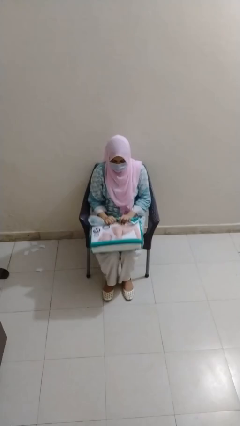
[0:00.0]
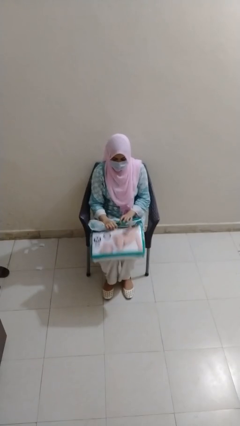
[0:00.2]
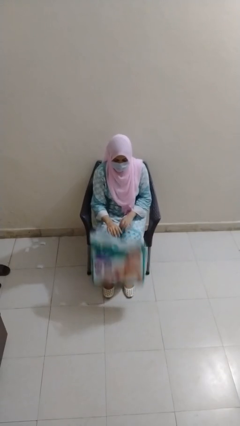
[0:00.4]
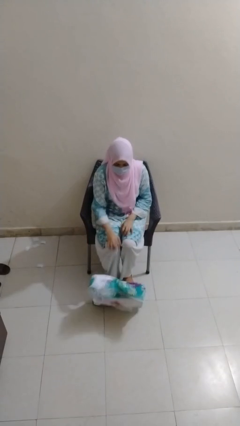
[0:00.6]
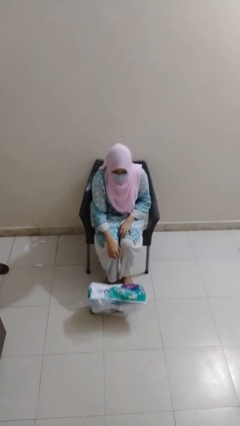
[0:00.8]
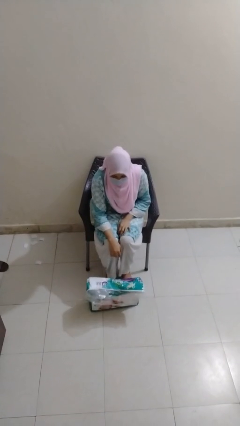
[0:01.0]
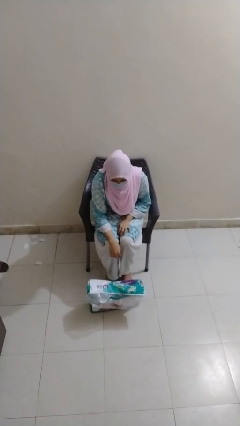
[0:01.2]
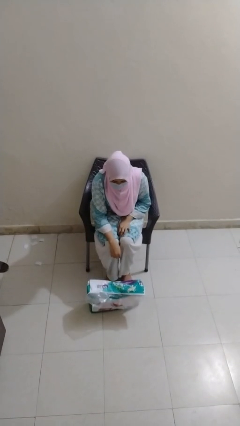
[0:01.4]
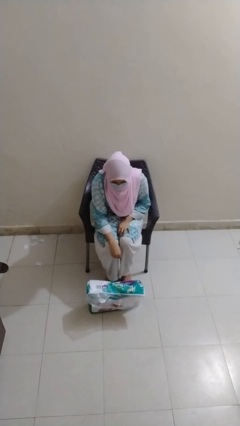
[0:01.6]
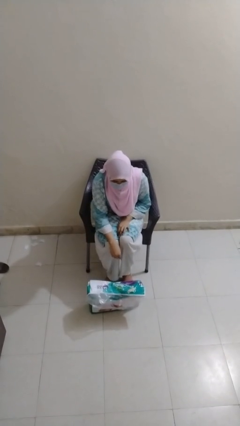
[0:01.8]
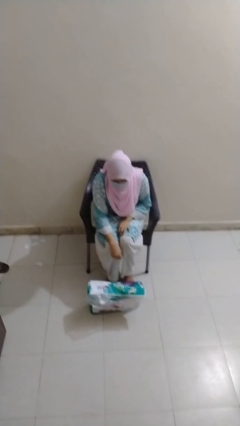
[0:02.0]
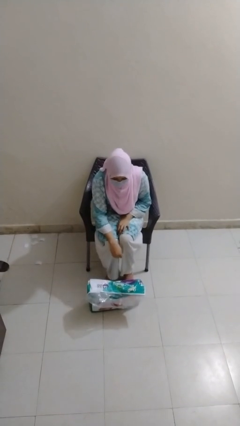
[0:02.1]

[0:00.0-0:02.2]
person drops object

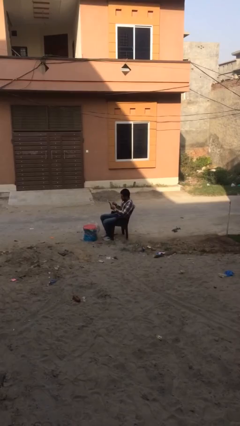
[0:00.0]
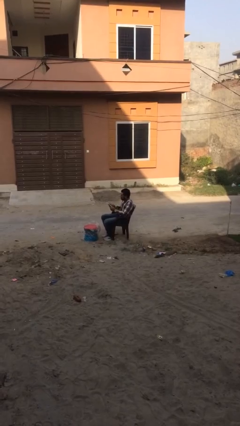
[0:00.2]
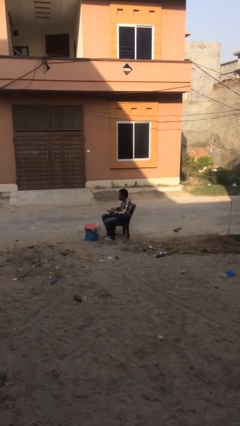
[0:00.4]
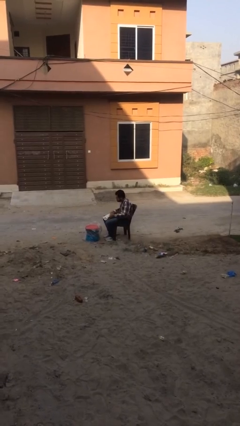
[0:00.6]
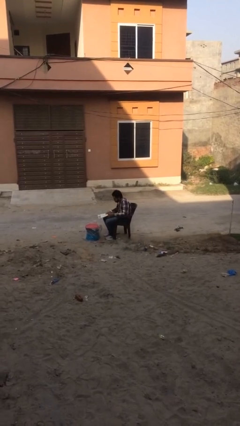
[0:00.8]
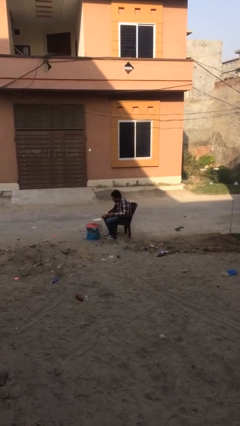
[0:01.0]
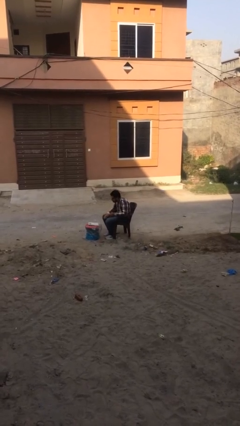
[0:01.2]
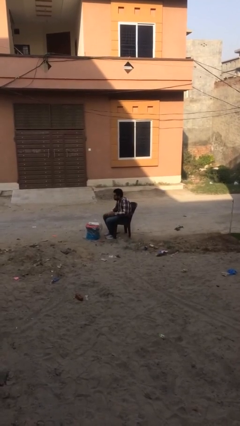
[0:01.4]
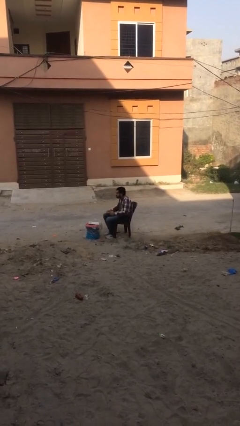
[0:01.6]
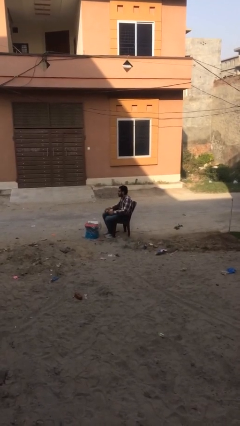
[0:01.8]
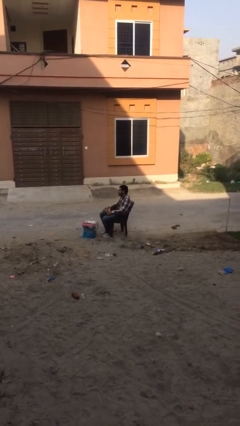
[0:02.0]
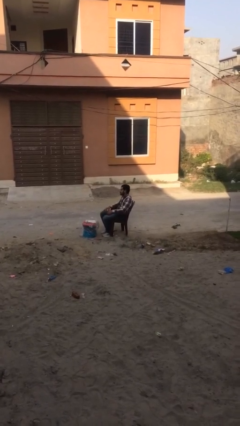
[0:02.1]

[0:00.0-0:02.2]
person puts down object on table

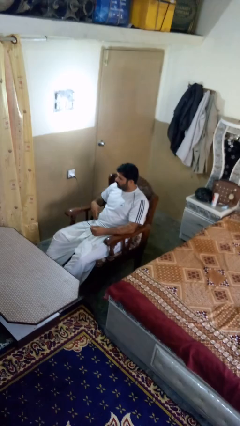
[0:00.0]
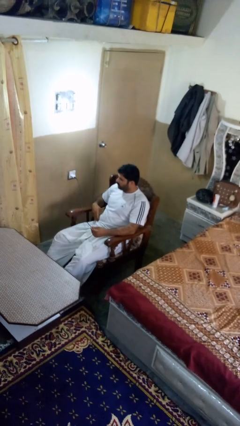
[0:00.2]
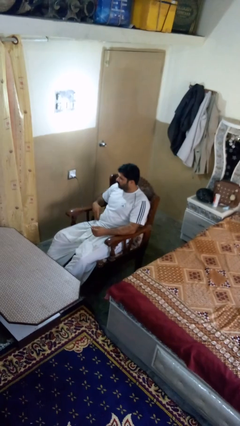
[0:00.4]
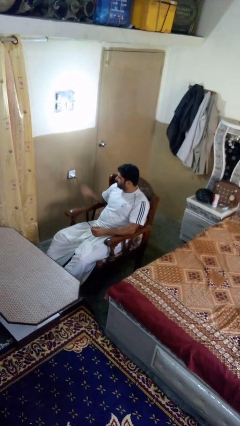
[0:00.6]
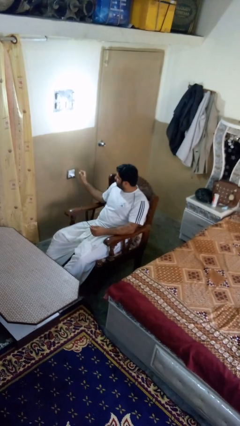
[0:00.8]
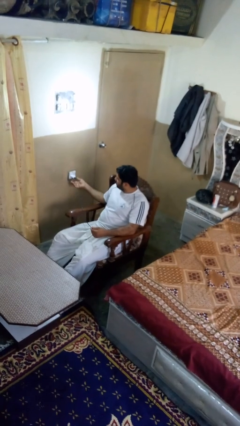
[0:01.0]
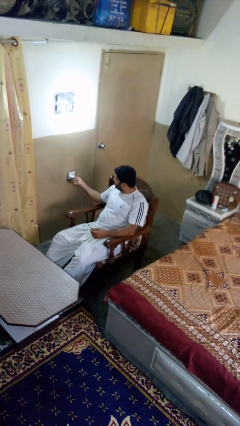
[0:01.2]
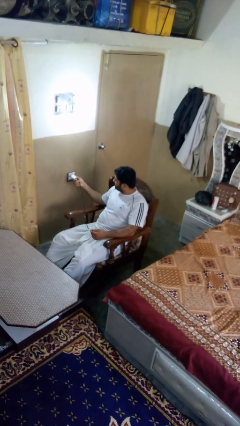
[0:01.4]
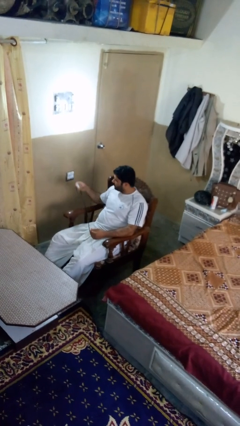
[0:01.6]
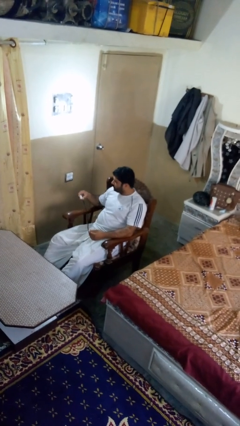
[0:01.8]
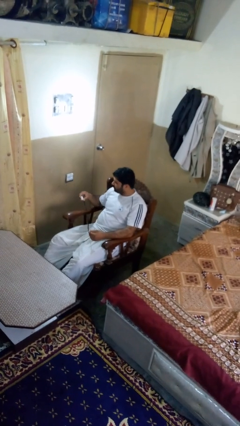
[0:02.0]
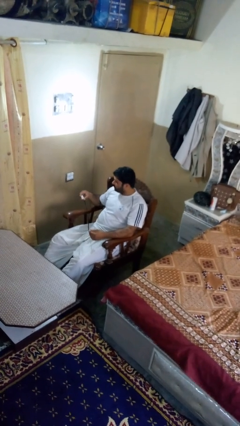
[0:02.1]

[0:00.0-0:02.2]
person unplugs from electrical socket

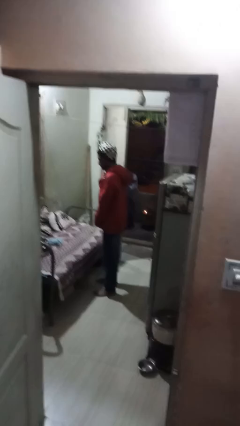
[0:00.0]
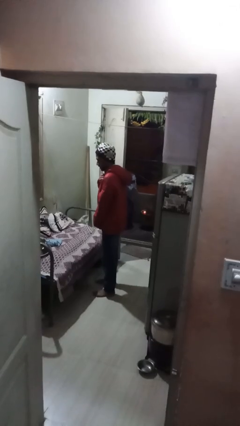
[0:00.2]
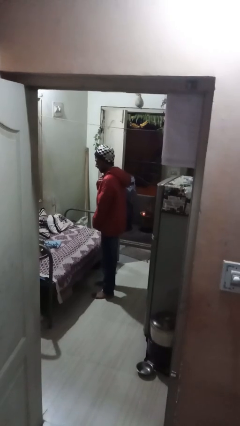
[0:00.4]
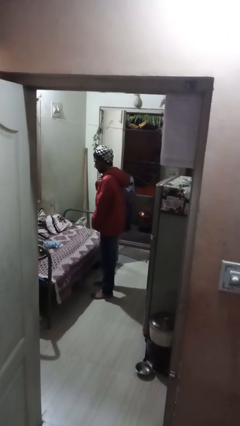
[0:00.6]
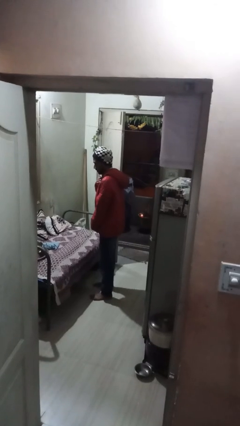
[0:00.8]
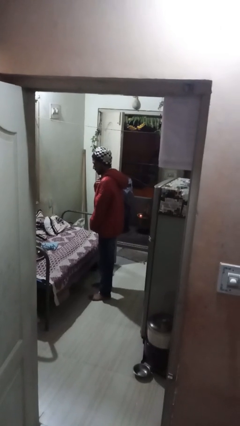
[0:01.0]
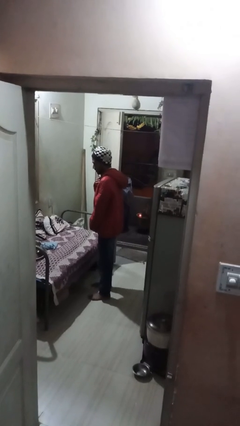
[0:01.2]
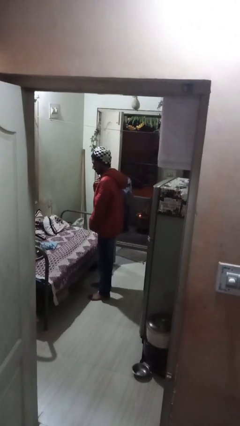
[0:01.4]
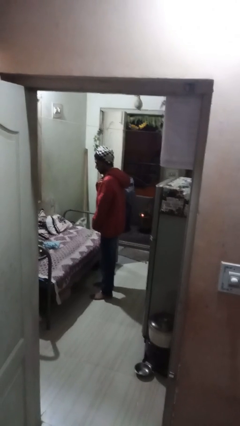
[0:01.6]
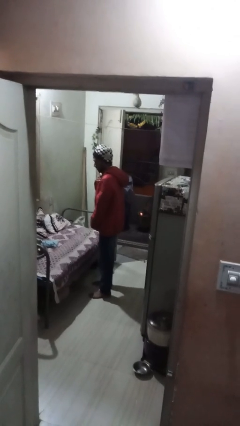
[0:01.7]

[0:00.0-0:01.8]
person zips up jacket

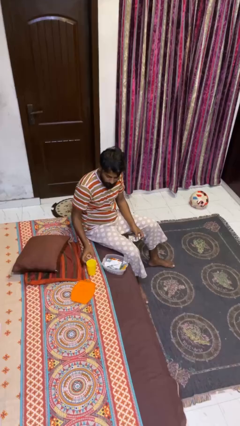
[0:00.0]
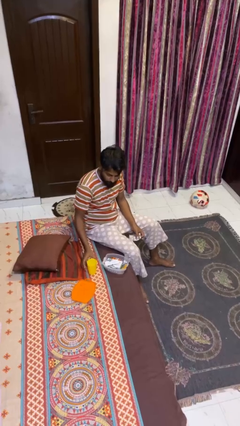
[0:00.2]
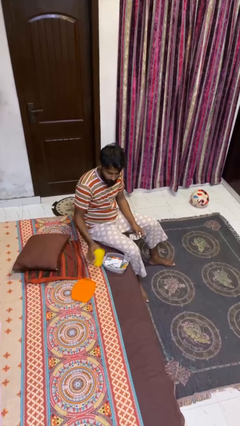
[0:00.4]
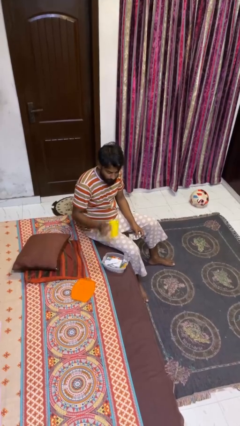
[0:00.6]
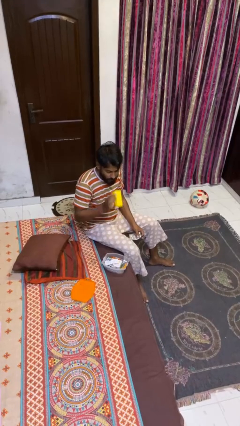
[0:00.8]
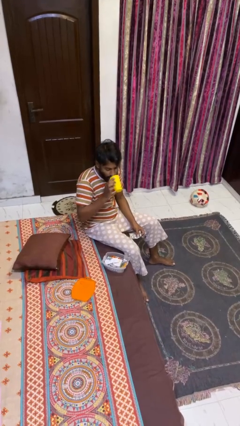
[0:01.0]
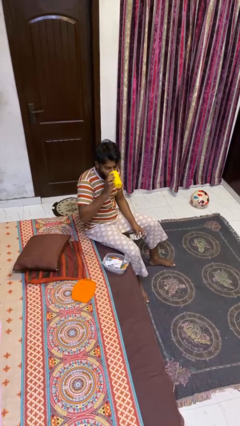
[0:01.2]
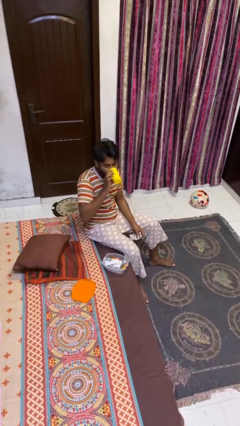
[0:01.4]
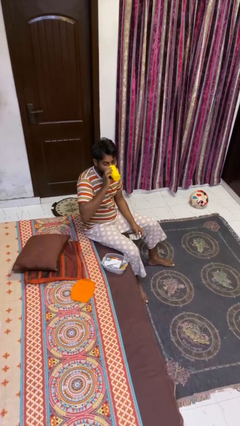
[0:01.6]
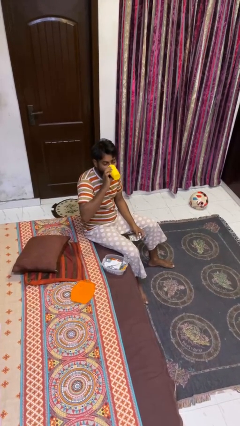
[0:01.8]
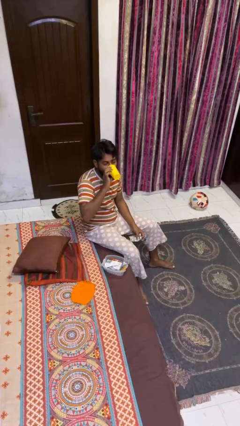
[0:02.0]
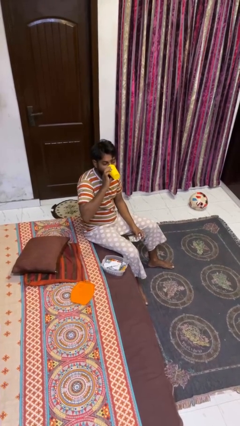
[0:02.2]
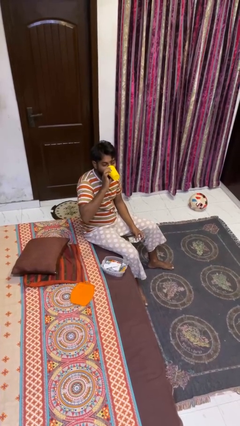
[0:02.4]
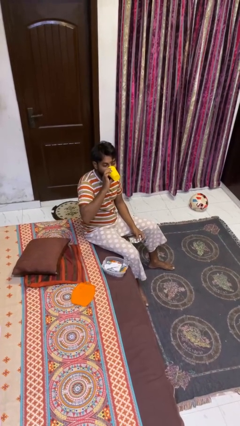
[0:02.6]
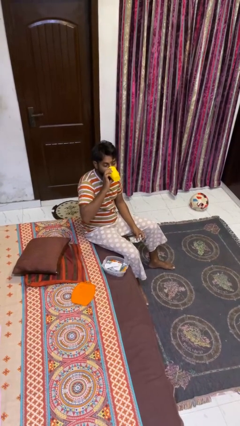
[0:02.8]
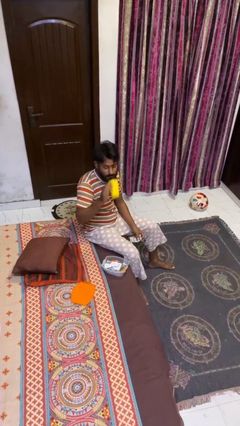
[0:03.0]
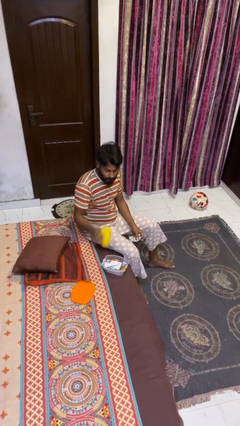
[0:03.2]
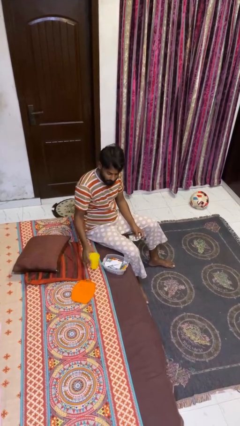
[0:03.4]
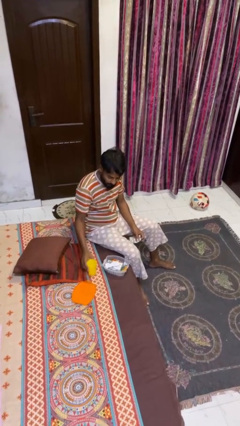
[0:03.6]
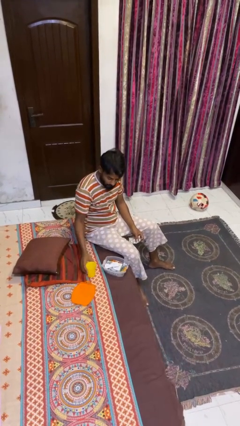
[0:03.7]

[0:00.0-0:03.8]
person drinks from cup

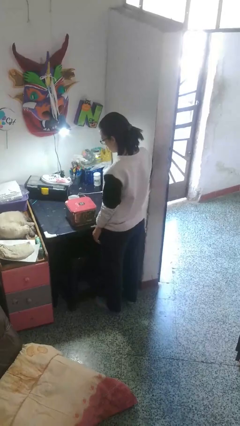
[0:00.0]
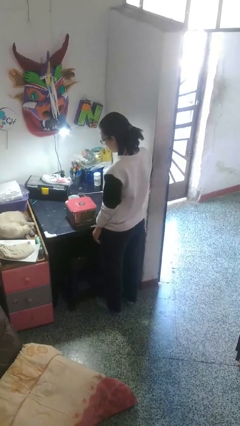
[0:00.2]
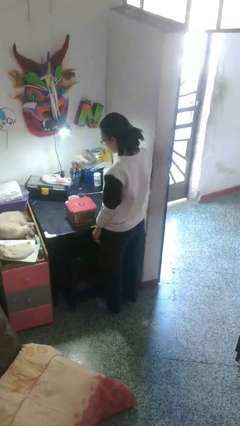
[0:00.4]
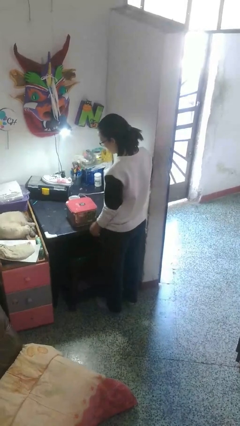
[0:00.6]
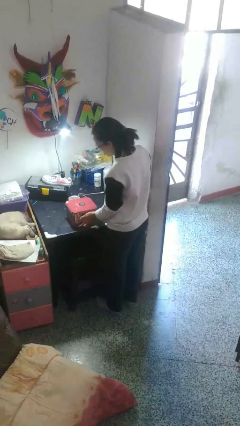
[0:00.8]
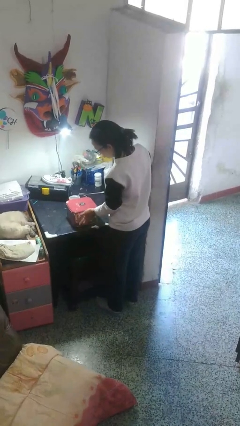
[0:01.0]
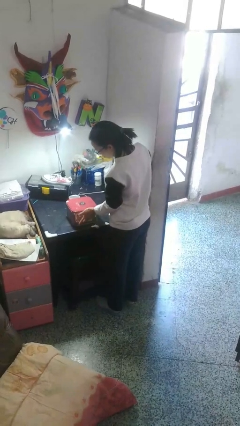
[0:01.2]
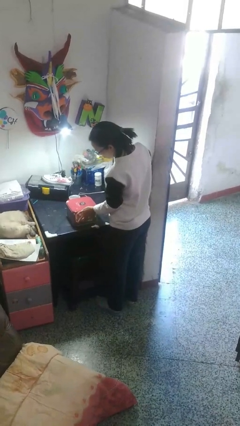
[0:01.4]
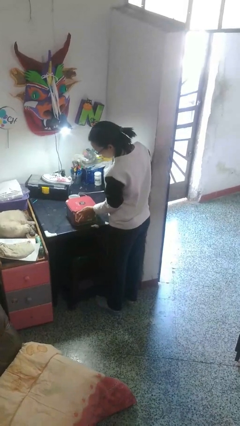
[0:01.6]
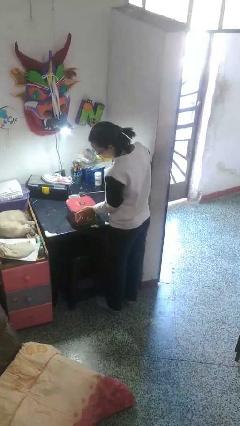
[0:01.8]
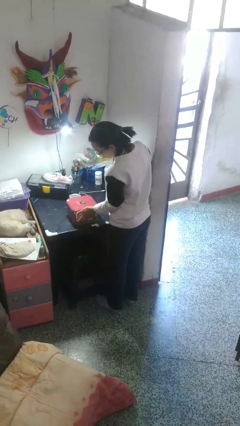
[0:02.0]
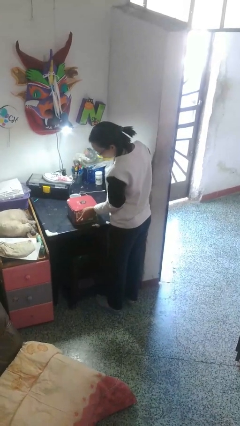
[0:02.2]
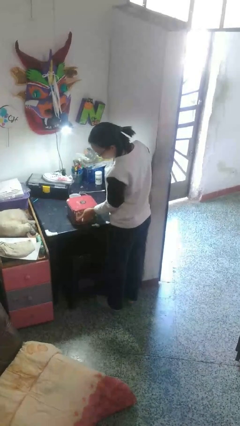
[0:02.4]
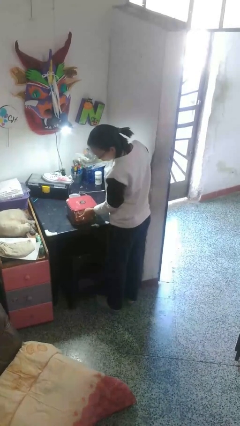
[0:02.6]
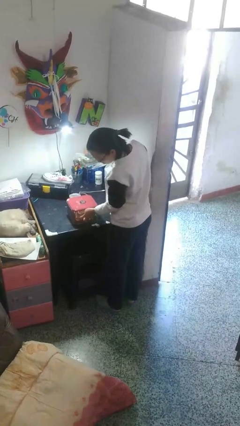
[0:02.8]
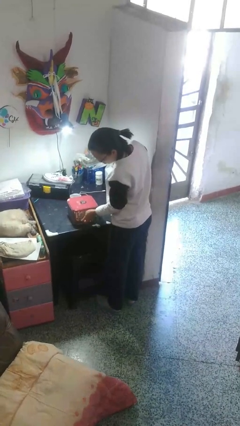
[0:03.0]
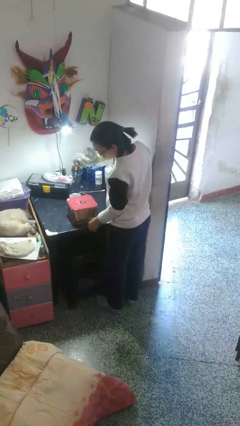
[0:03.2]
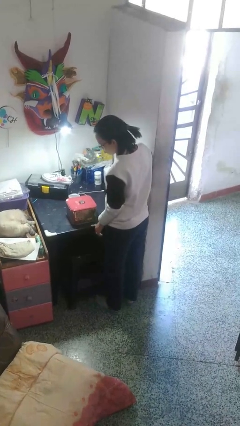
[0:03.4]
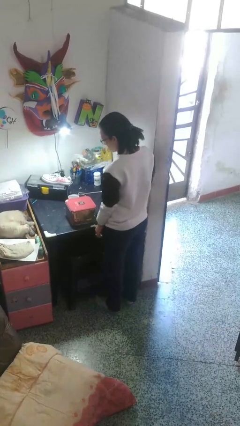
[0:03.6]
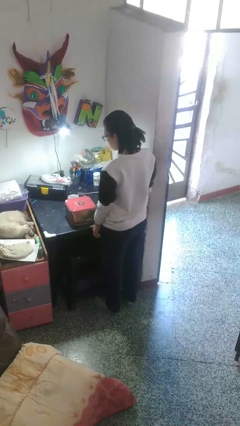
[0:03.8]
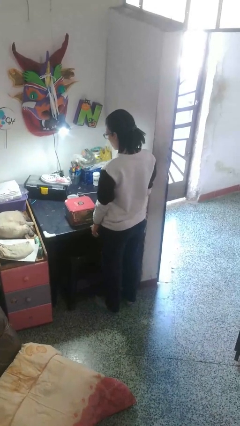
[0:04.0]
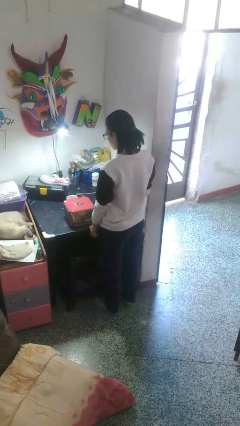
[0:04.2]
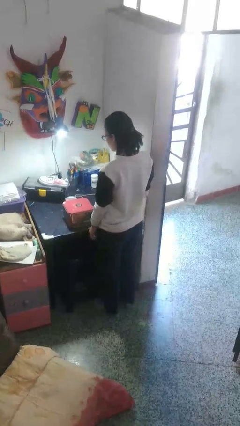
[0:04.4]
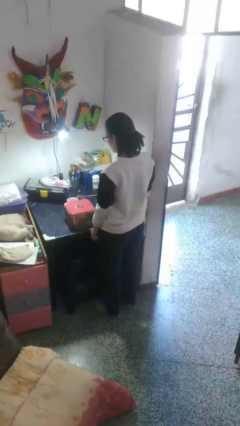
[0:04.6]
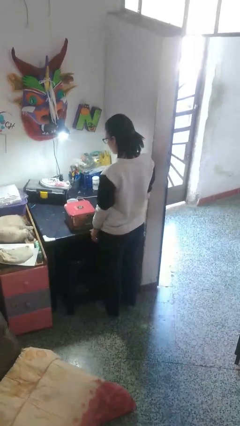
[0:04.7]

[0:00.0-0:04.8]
person taps object with finger

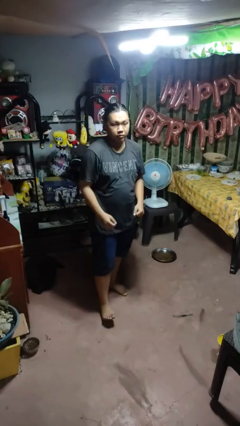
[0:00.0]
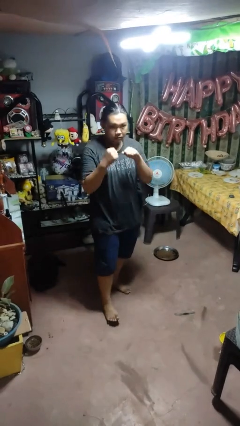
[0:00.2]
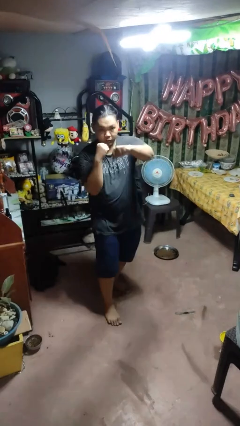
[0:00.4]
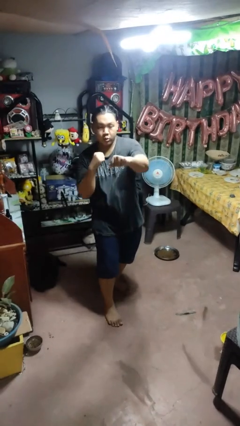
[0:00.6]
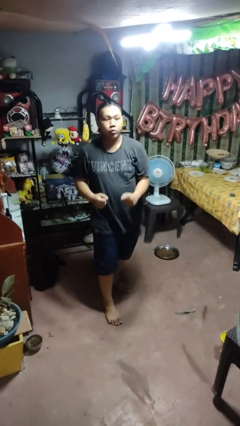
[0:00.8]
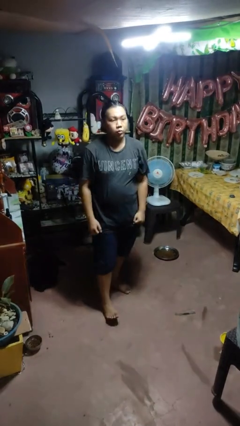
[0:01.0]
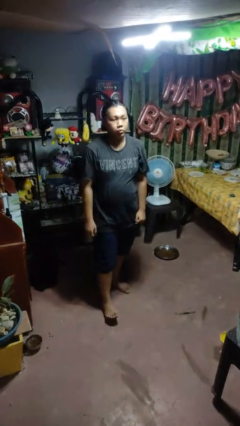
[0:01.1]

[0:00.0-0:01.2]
person punches
